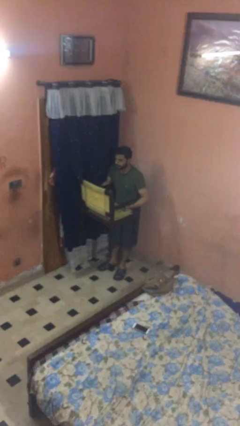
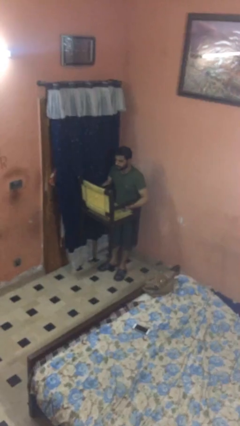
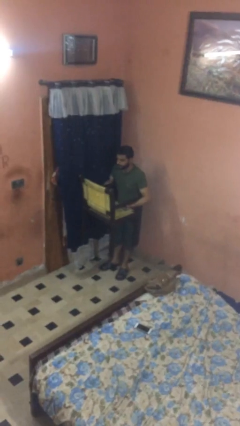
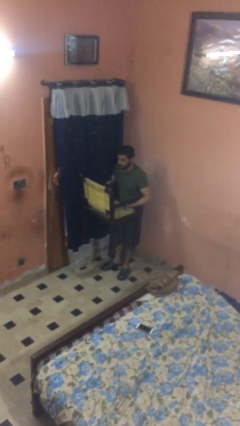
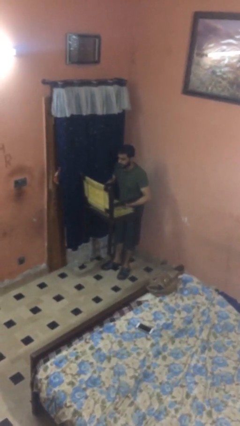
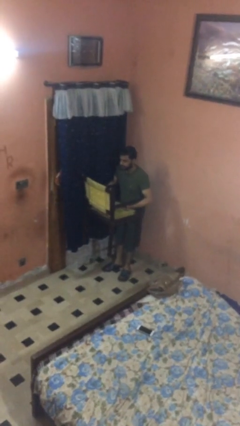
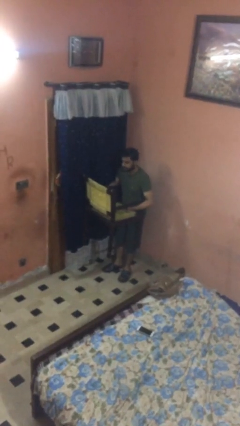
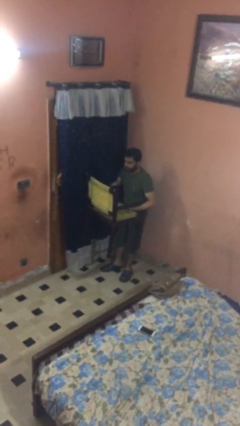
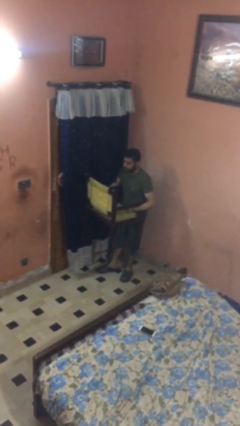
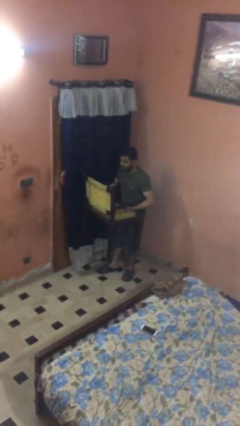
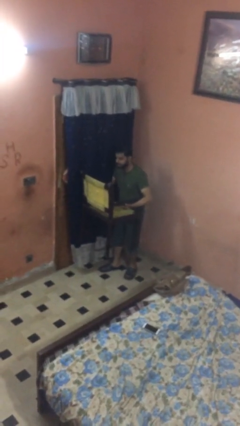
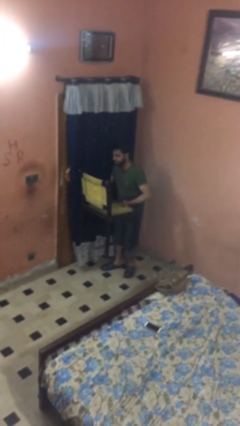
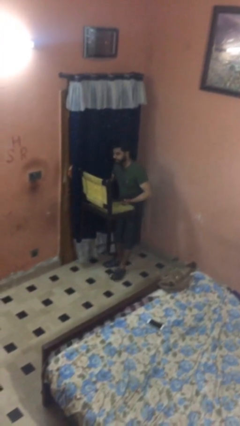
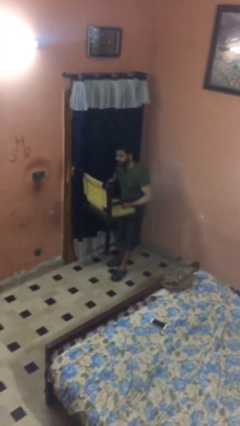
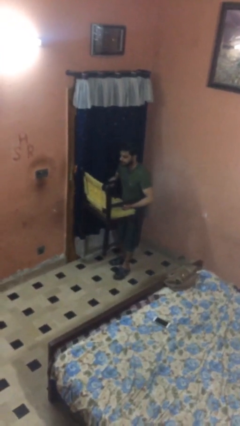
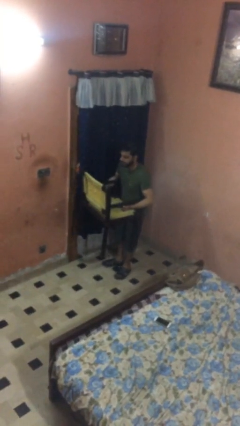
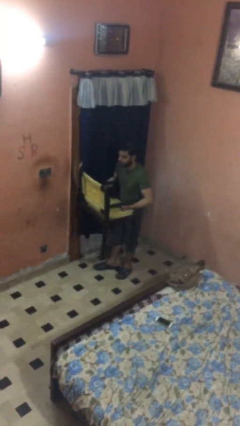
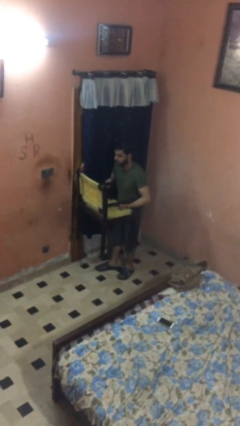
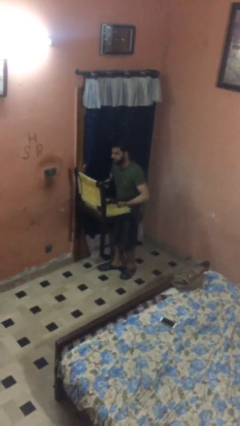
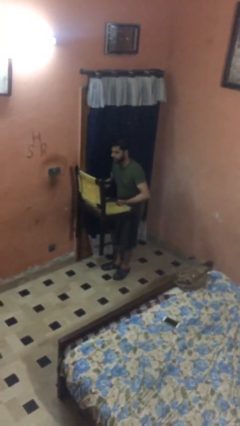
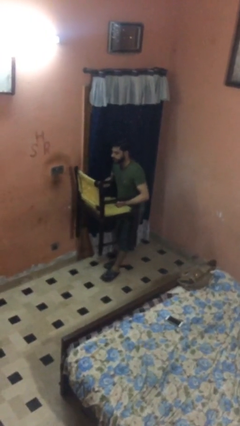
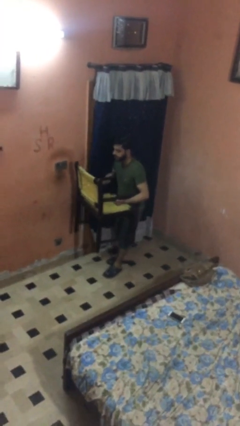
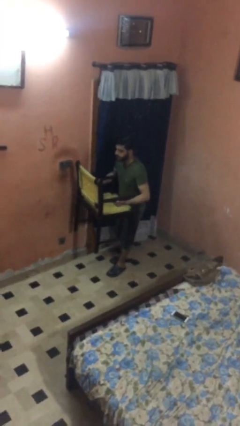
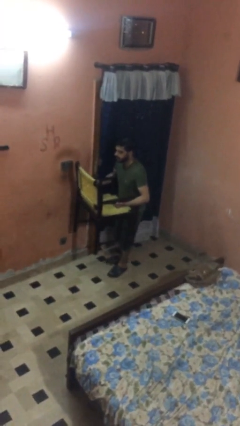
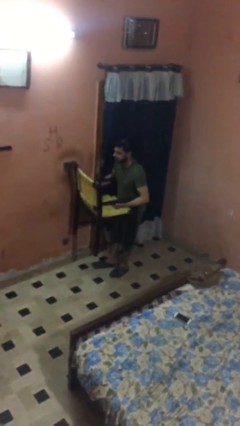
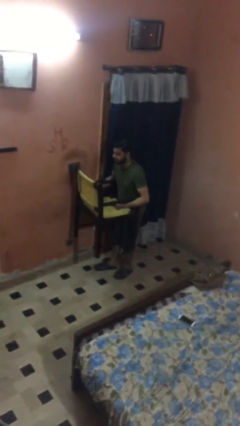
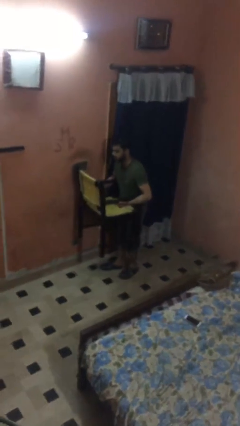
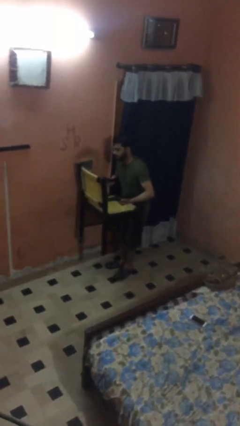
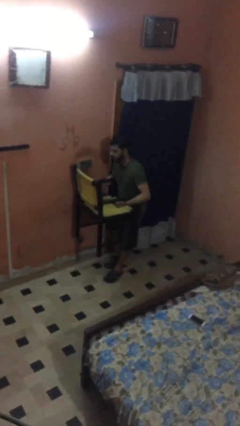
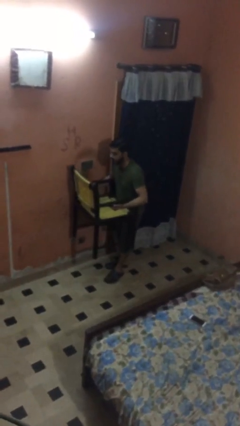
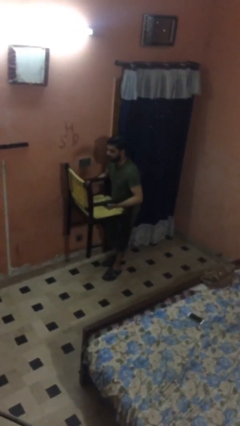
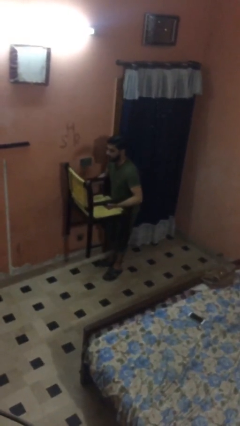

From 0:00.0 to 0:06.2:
person carries heavy object

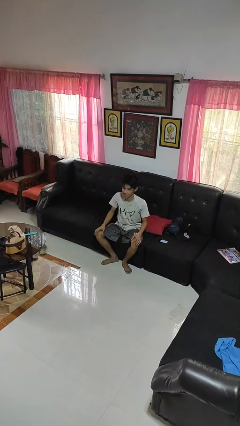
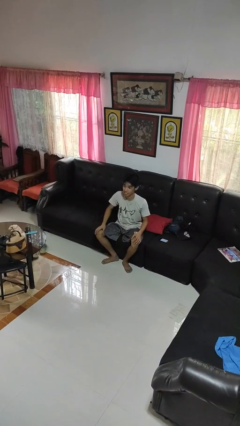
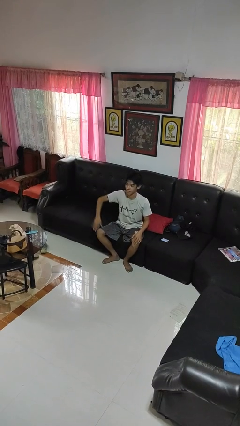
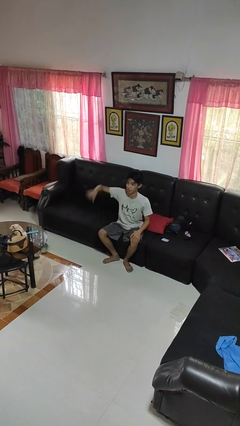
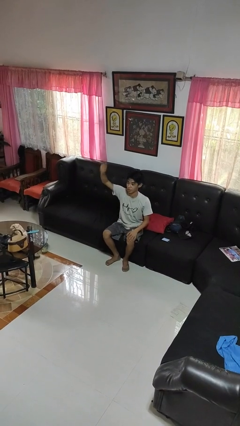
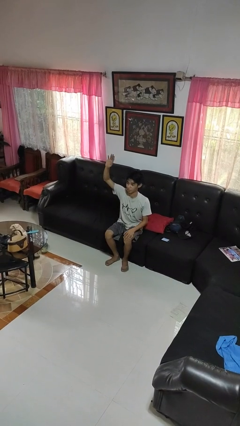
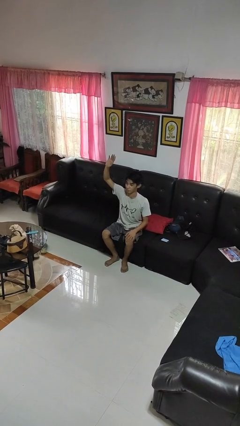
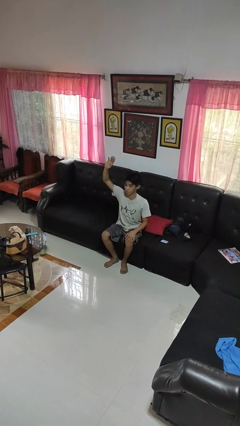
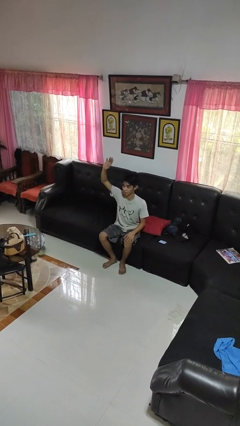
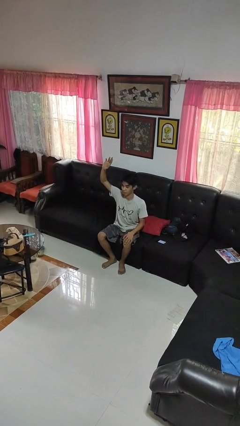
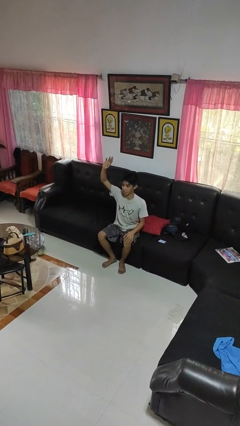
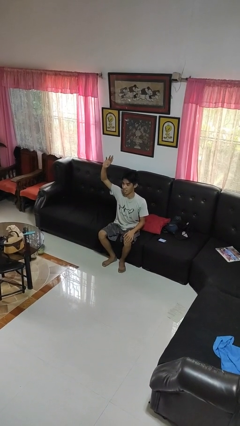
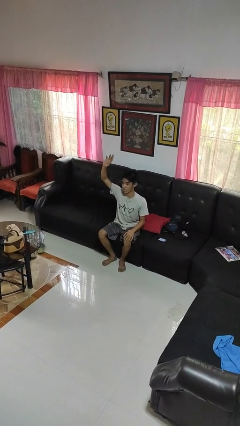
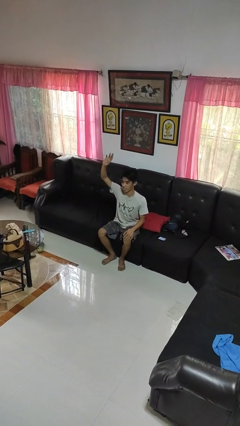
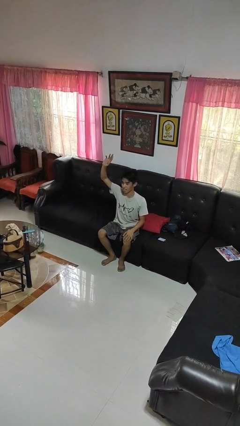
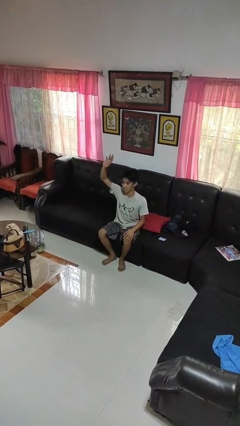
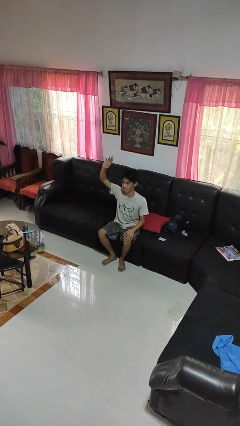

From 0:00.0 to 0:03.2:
person gestures raise hand

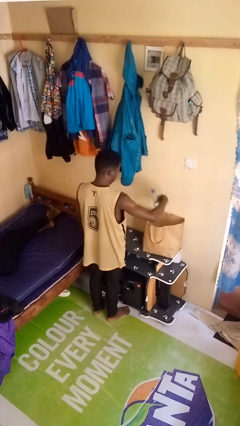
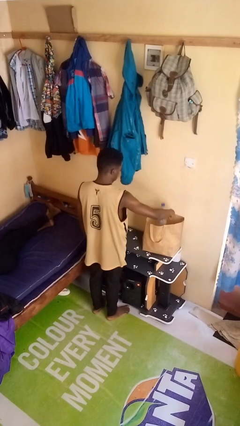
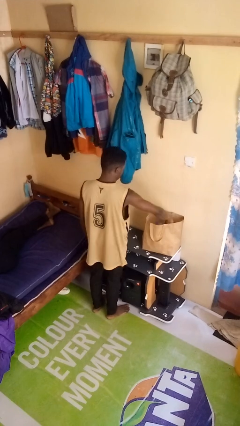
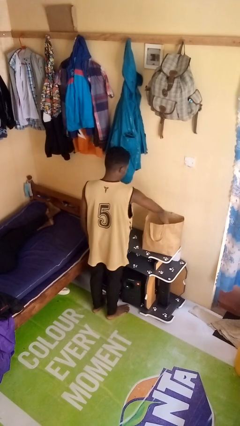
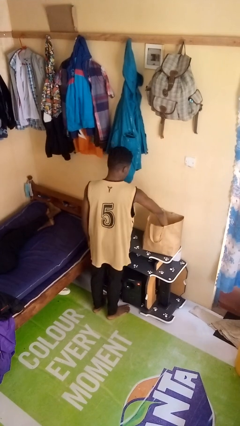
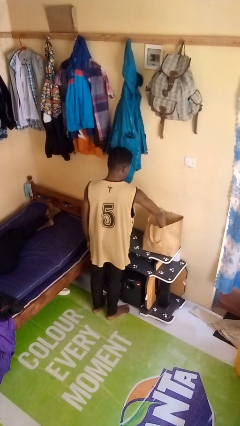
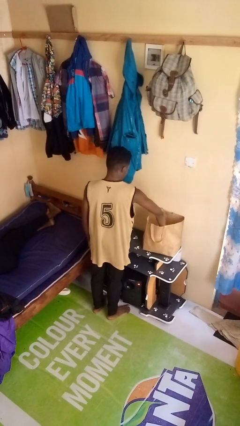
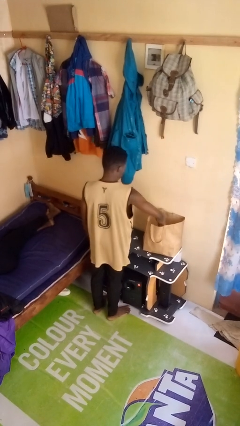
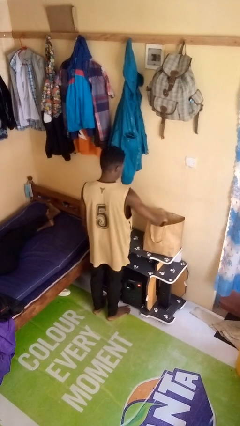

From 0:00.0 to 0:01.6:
person puts object into bag

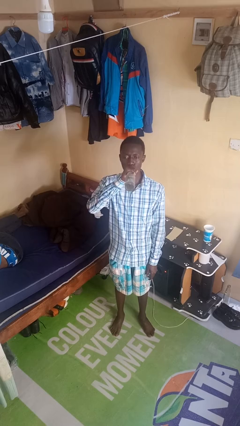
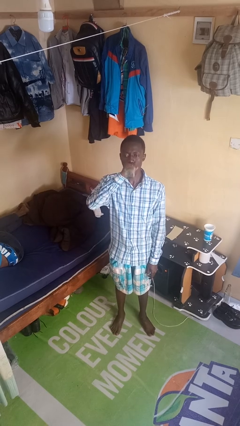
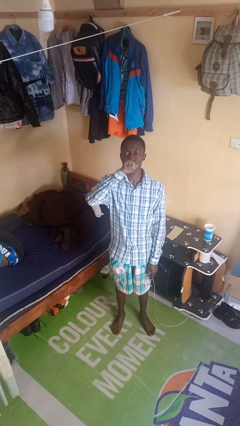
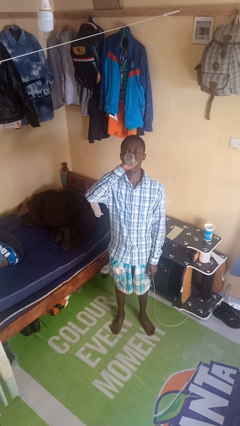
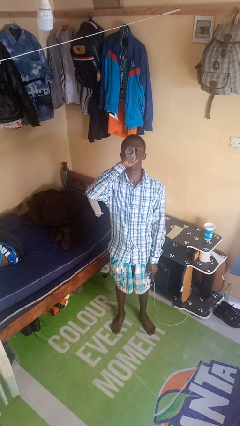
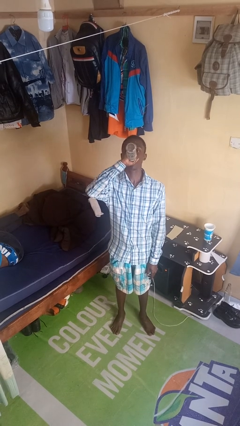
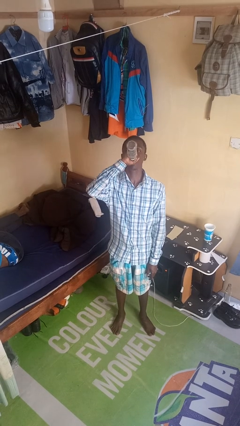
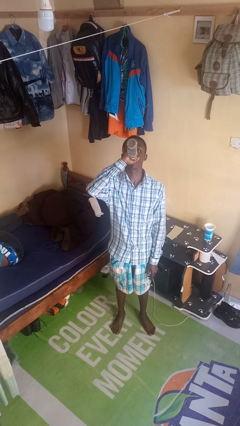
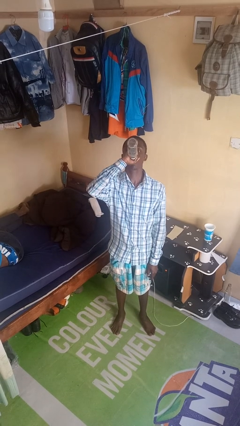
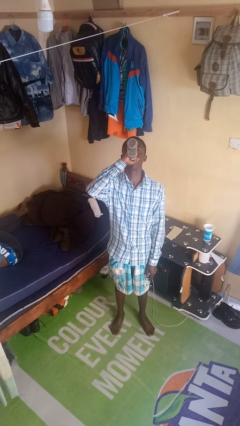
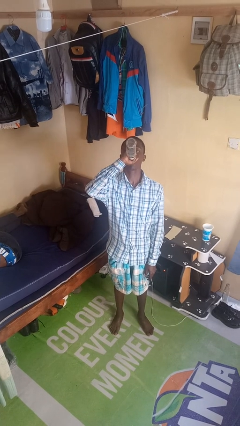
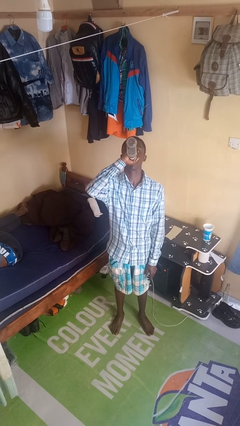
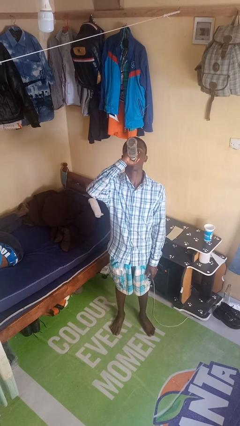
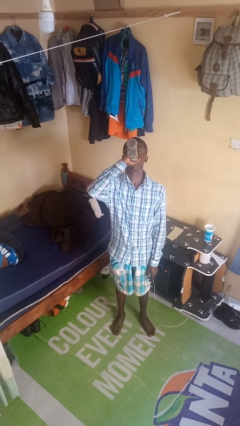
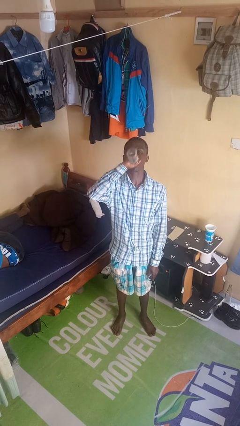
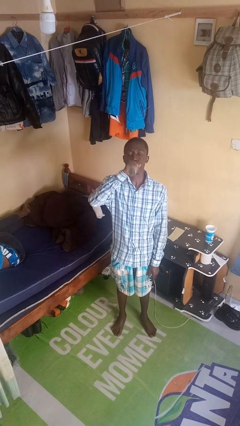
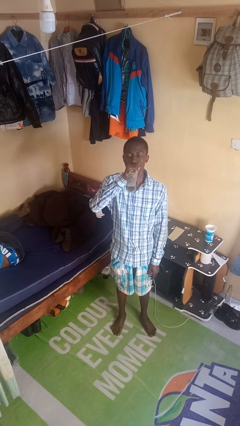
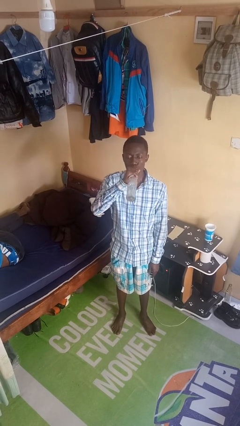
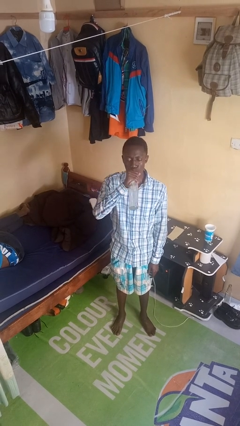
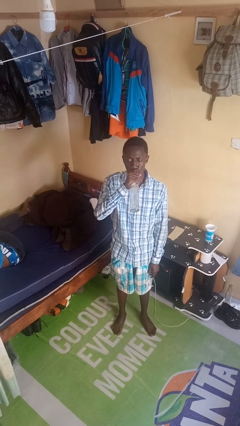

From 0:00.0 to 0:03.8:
person drinks from bottle

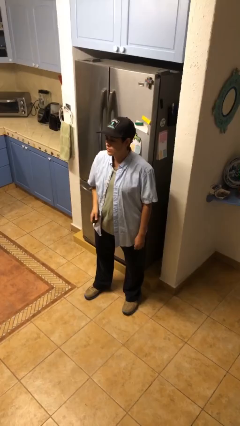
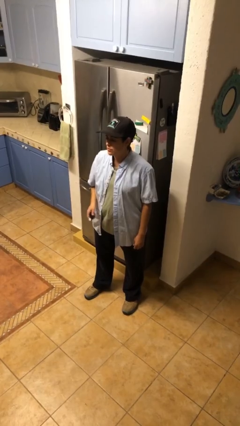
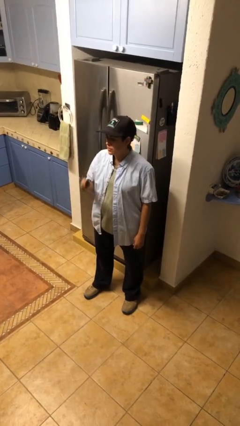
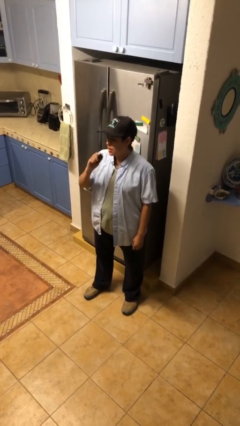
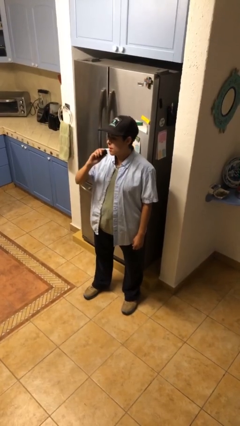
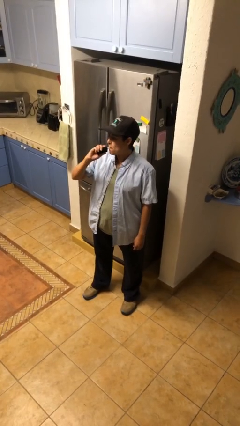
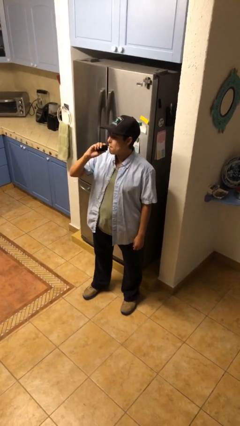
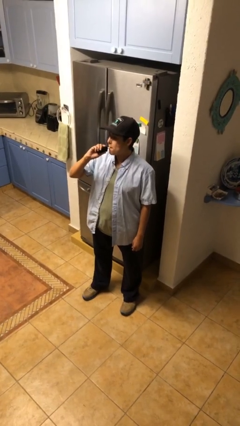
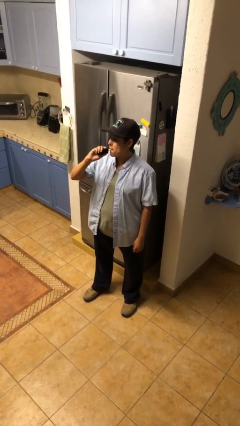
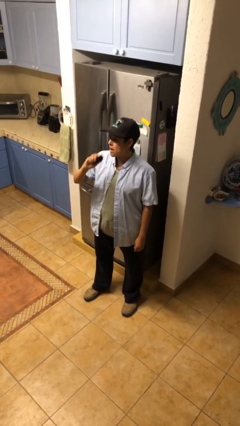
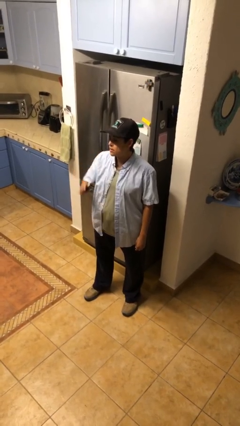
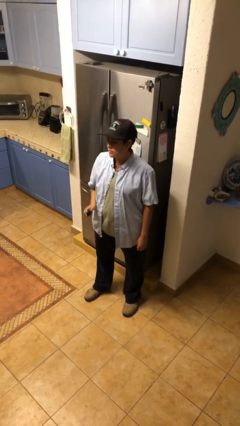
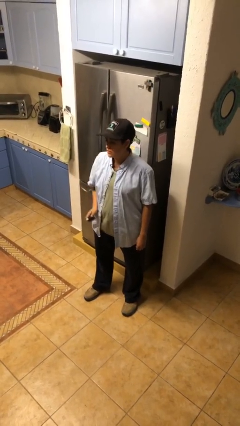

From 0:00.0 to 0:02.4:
person vapes
